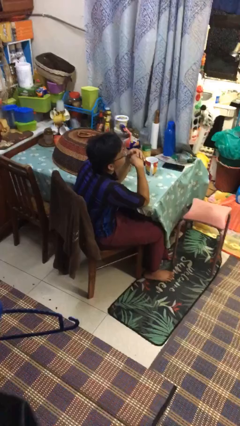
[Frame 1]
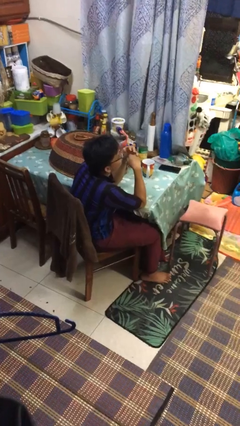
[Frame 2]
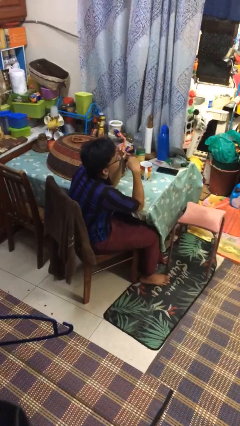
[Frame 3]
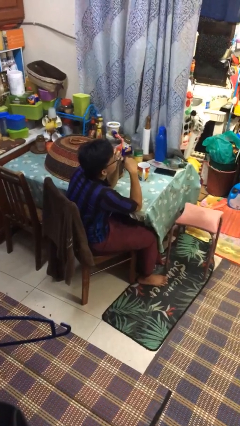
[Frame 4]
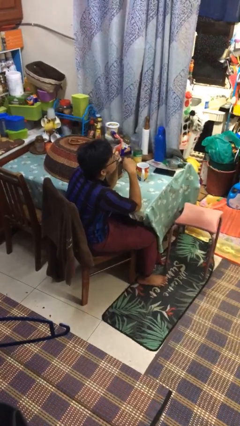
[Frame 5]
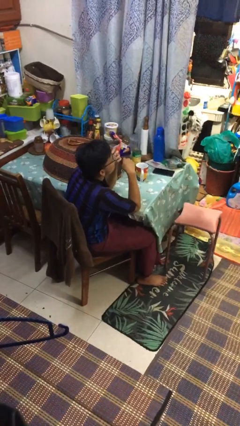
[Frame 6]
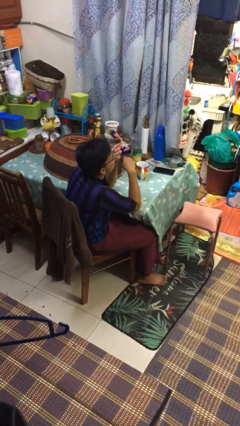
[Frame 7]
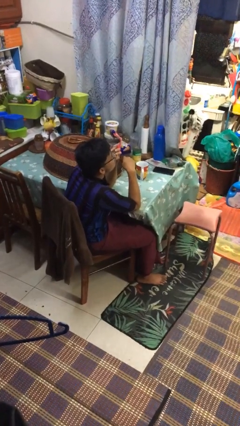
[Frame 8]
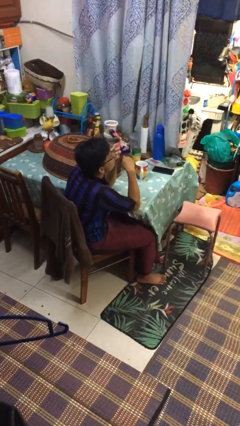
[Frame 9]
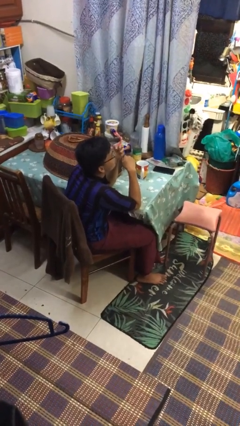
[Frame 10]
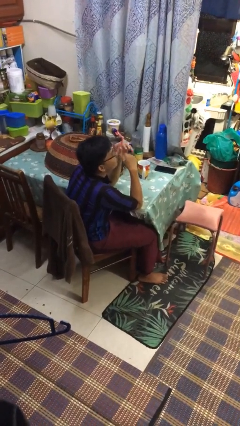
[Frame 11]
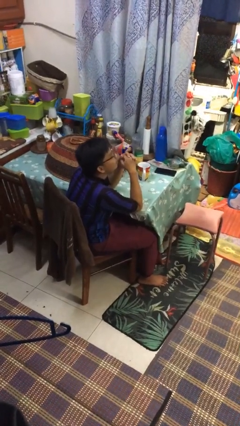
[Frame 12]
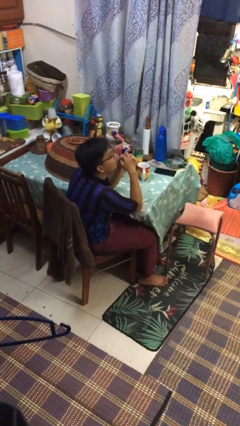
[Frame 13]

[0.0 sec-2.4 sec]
person licks fingers

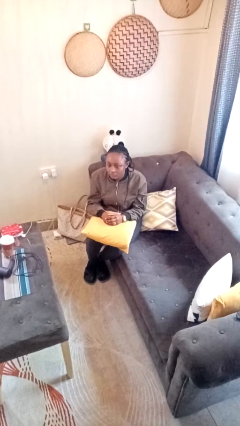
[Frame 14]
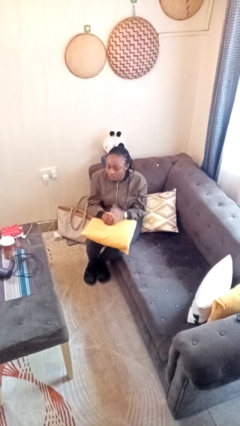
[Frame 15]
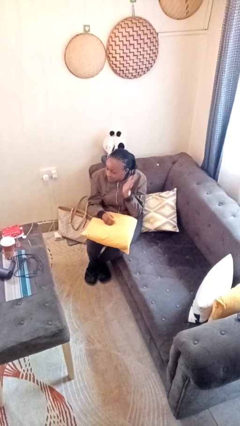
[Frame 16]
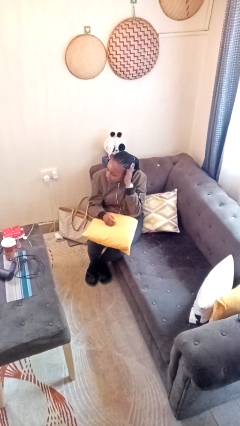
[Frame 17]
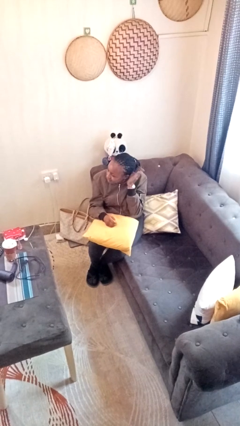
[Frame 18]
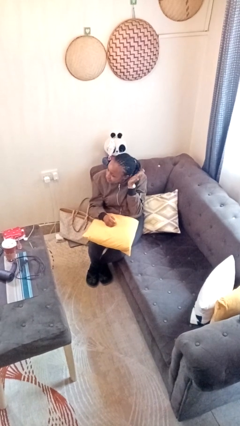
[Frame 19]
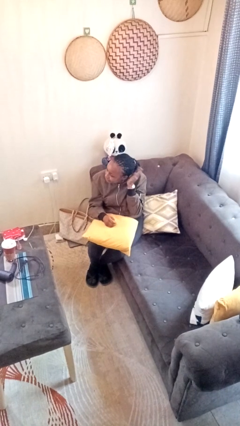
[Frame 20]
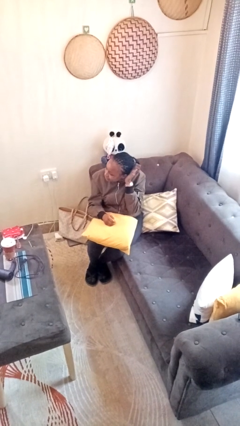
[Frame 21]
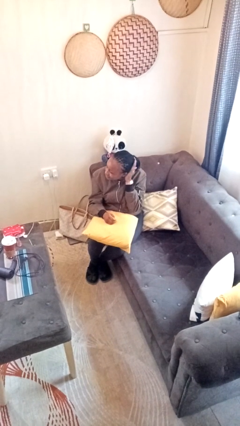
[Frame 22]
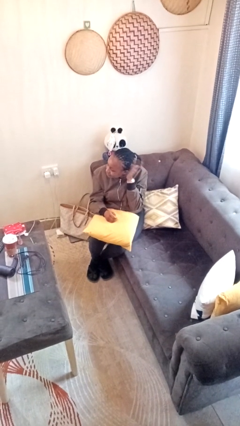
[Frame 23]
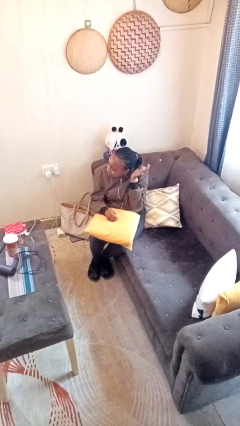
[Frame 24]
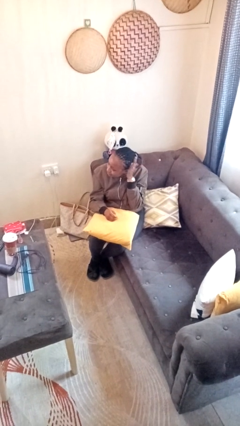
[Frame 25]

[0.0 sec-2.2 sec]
person pats head

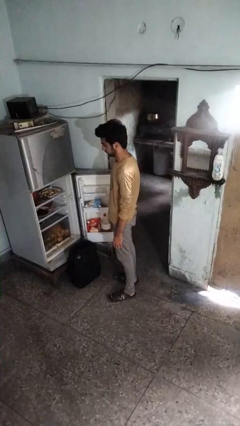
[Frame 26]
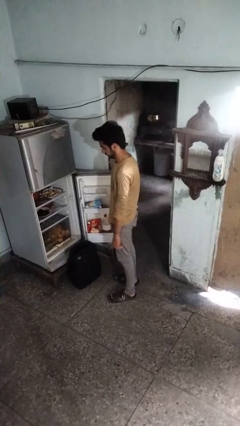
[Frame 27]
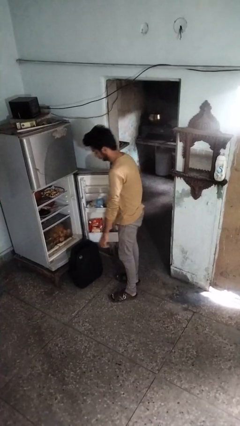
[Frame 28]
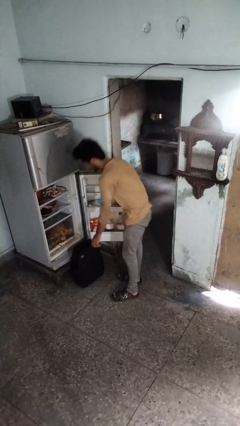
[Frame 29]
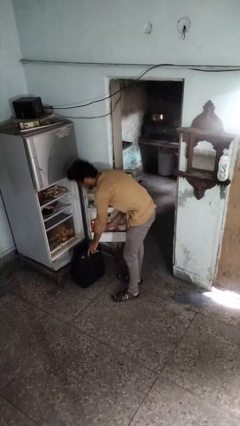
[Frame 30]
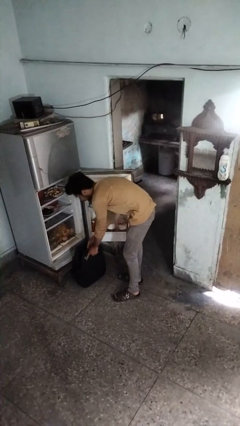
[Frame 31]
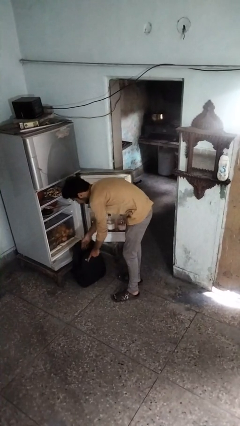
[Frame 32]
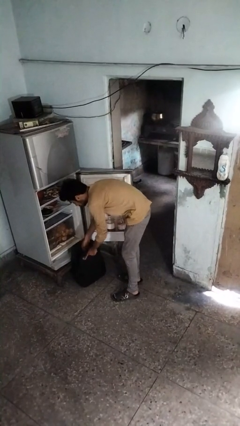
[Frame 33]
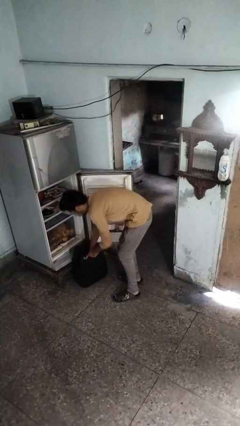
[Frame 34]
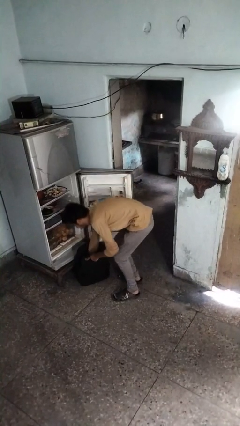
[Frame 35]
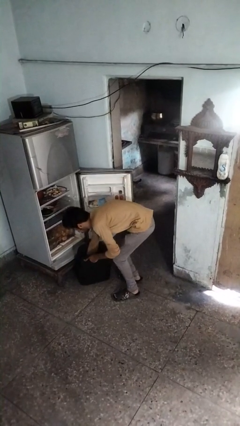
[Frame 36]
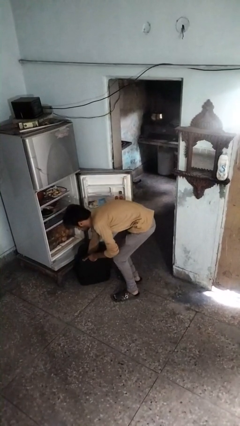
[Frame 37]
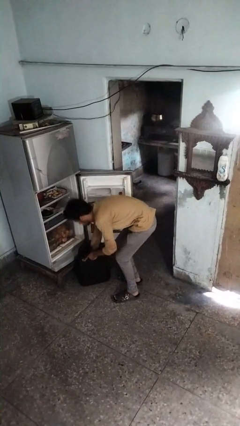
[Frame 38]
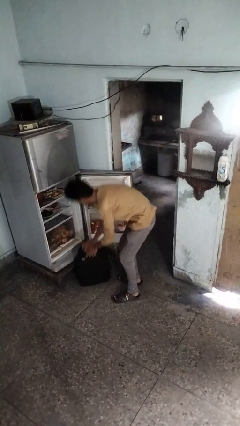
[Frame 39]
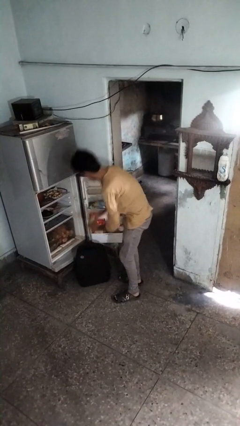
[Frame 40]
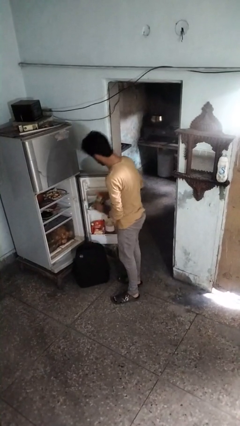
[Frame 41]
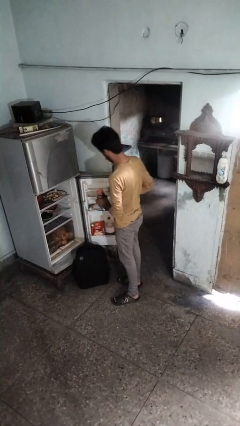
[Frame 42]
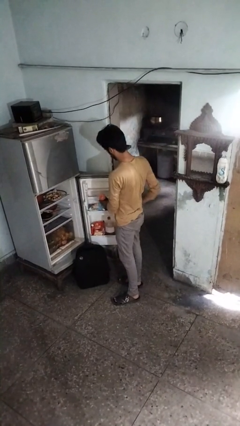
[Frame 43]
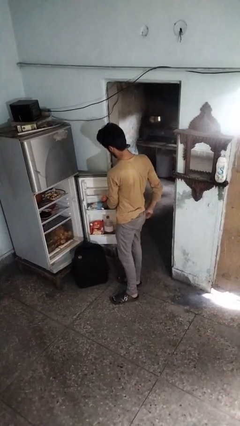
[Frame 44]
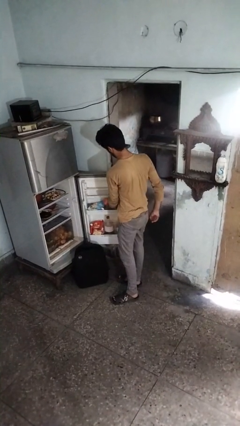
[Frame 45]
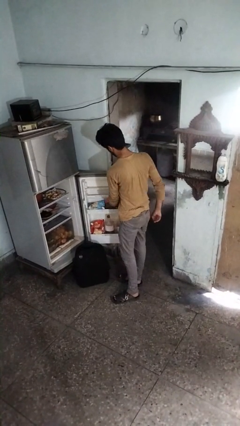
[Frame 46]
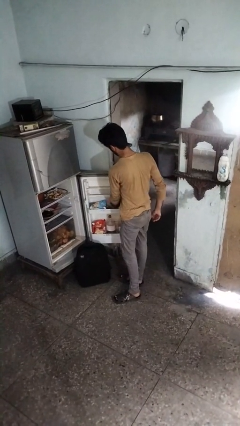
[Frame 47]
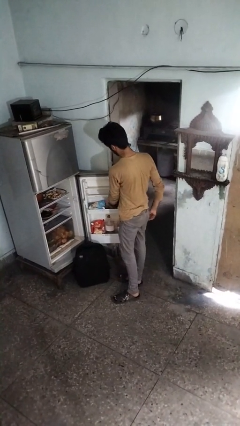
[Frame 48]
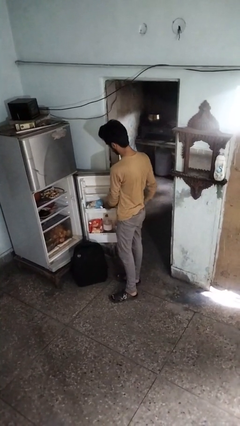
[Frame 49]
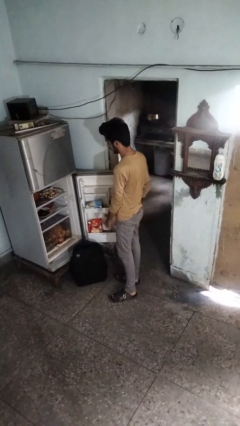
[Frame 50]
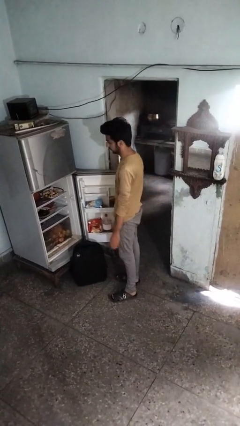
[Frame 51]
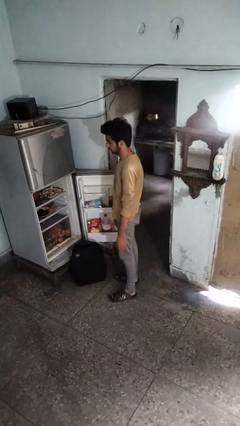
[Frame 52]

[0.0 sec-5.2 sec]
person loads groceries into refrigerator

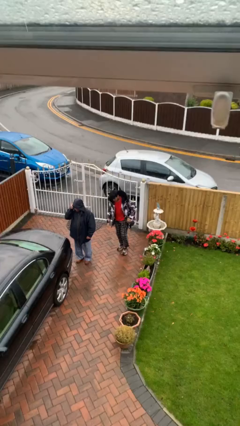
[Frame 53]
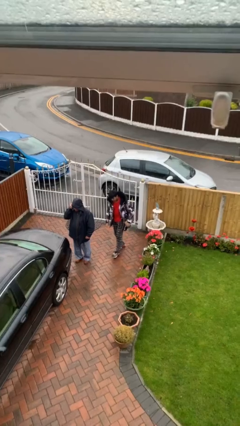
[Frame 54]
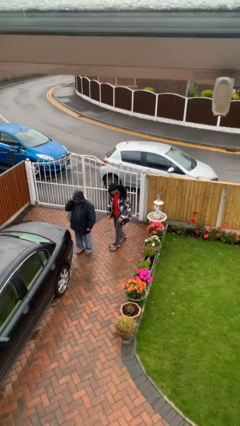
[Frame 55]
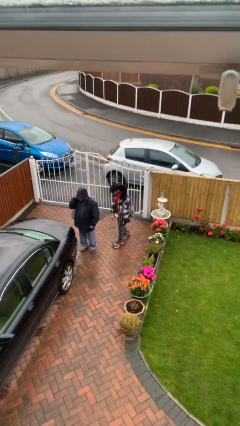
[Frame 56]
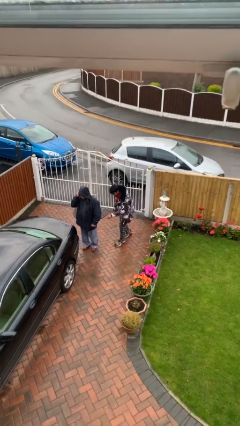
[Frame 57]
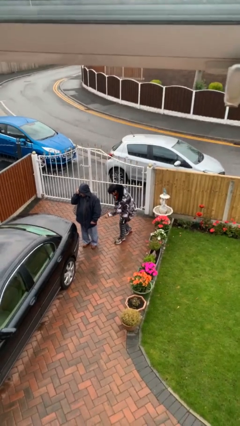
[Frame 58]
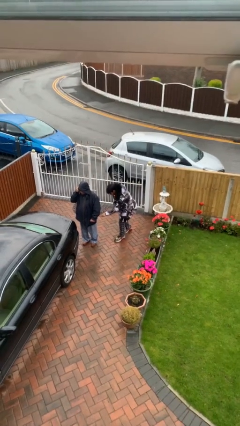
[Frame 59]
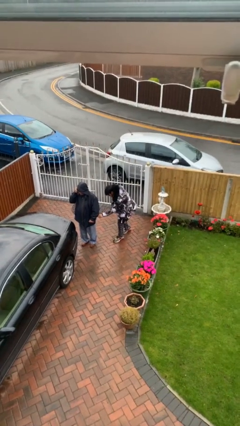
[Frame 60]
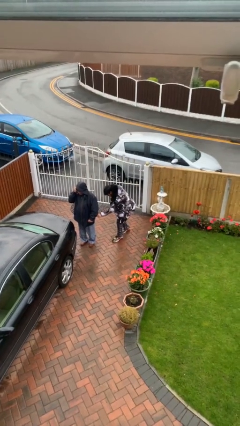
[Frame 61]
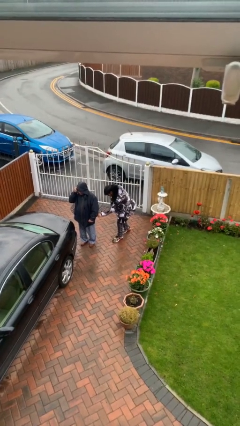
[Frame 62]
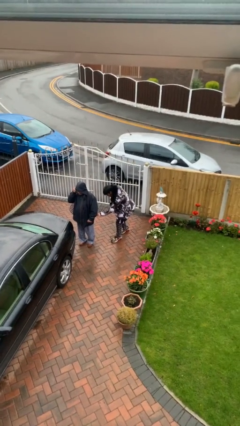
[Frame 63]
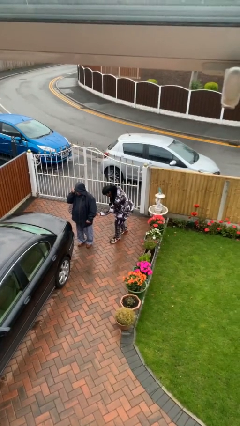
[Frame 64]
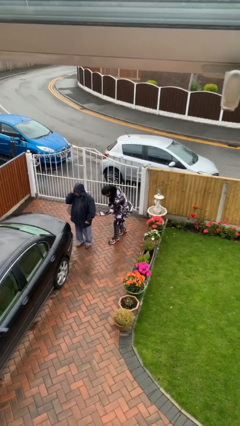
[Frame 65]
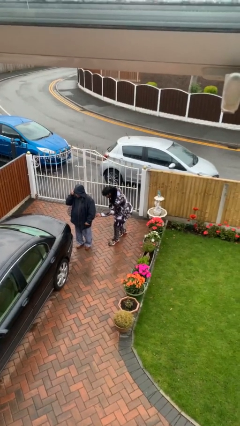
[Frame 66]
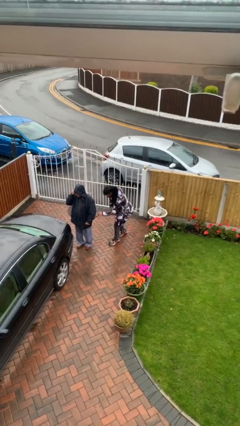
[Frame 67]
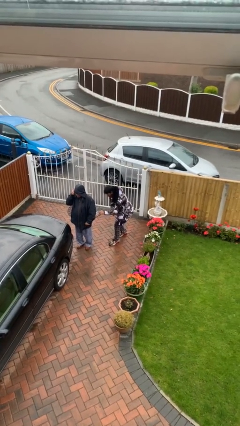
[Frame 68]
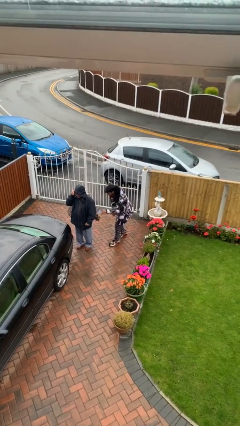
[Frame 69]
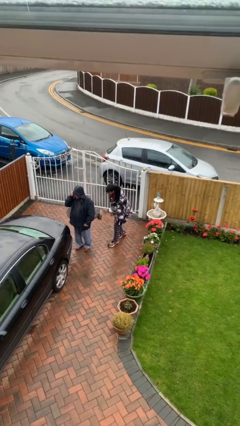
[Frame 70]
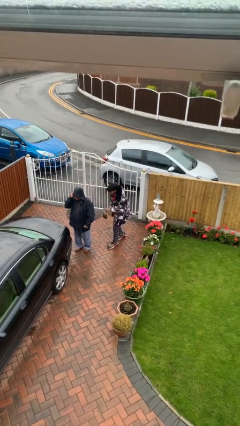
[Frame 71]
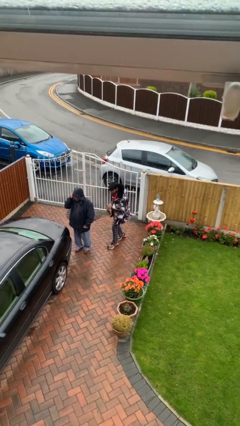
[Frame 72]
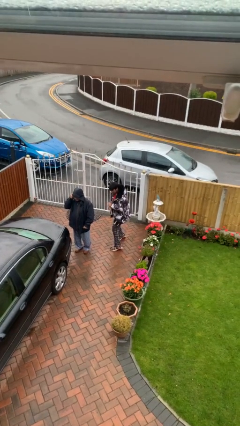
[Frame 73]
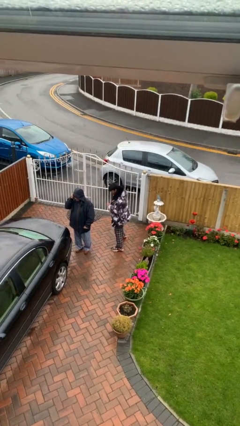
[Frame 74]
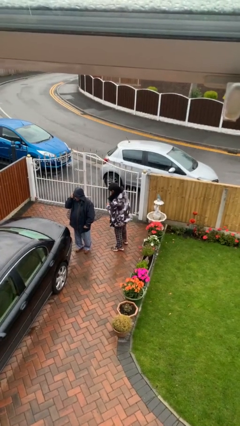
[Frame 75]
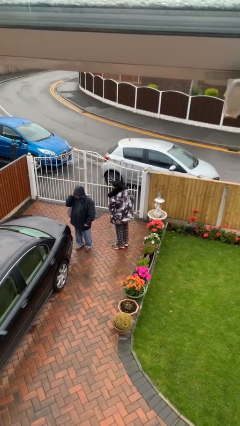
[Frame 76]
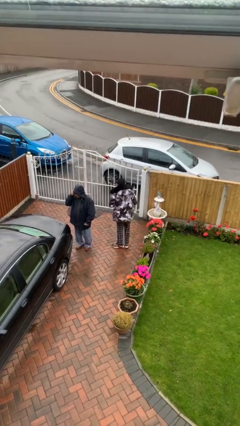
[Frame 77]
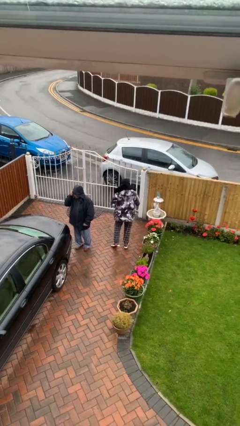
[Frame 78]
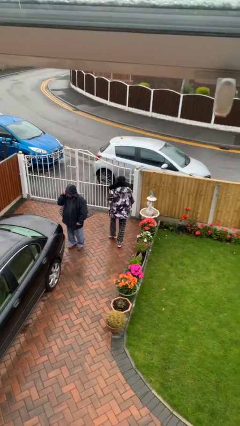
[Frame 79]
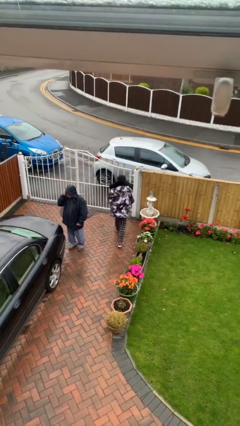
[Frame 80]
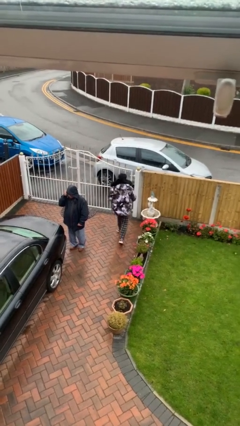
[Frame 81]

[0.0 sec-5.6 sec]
person steals object from person

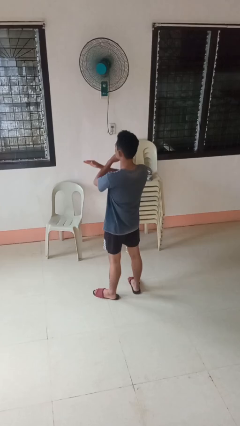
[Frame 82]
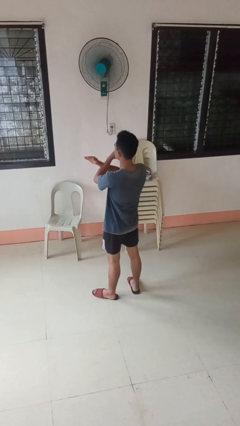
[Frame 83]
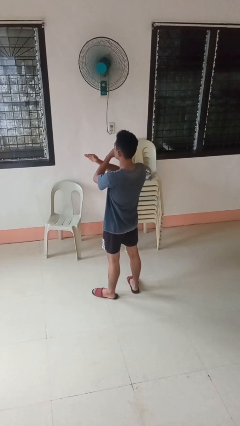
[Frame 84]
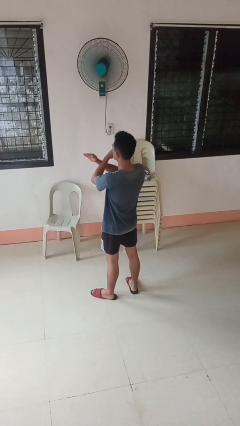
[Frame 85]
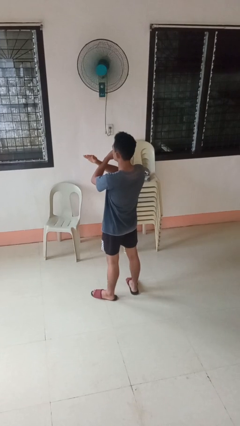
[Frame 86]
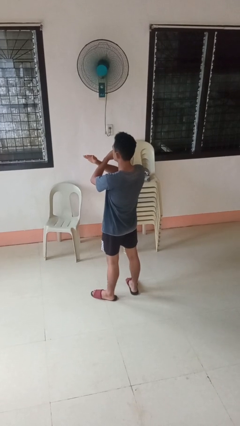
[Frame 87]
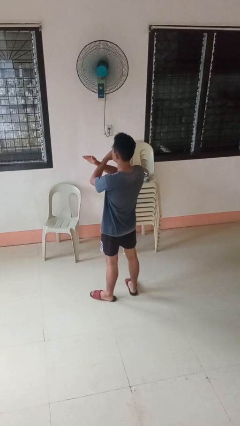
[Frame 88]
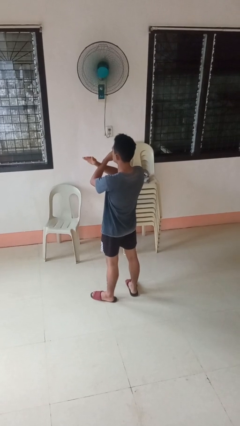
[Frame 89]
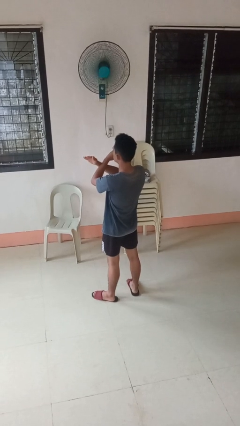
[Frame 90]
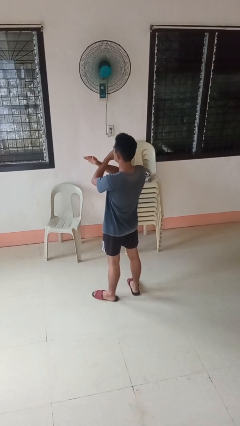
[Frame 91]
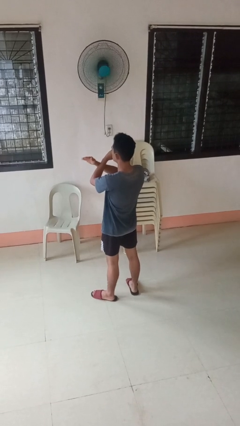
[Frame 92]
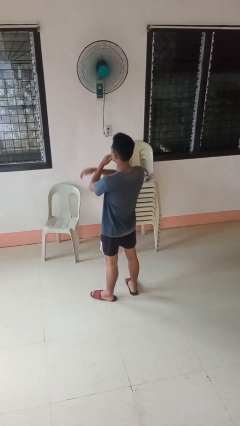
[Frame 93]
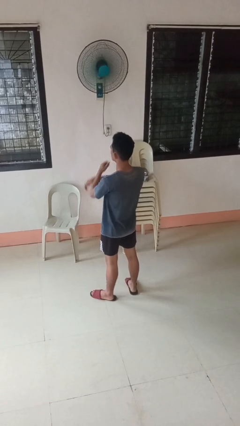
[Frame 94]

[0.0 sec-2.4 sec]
person gestures arms x
